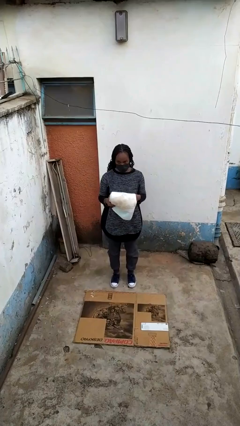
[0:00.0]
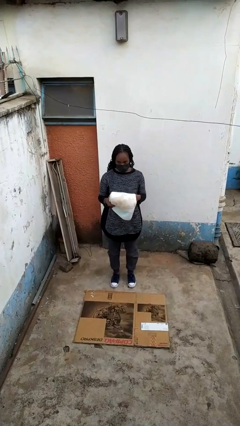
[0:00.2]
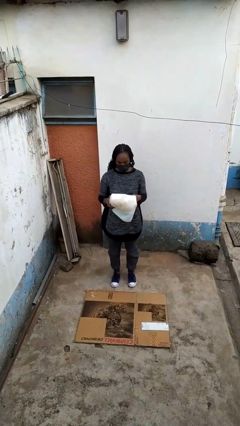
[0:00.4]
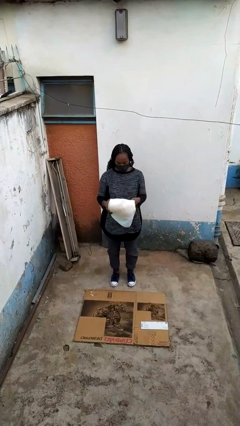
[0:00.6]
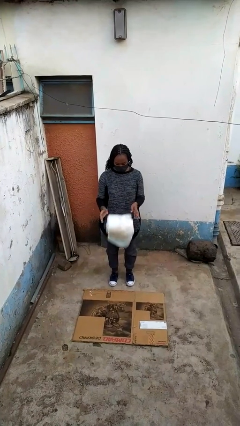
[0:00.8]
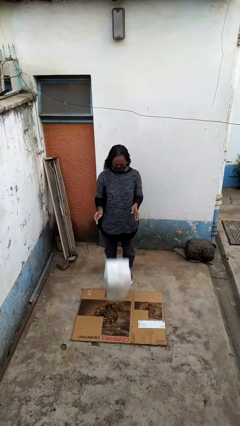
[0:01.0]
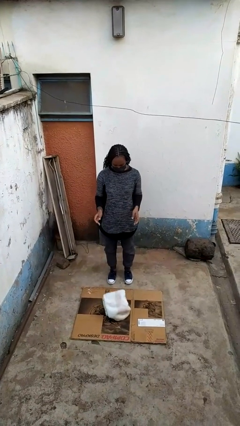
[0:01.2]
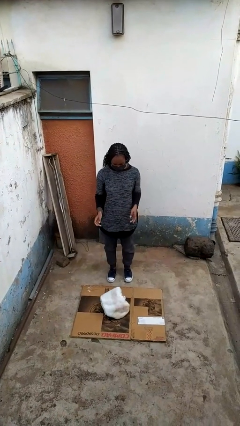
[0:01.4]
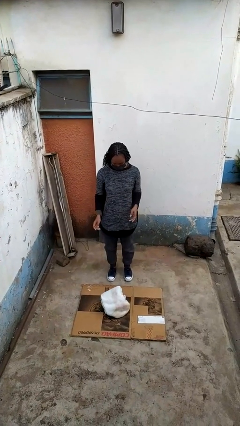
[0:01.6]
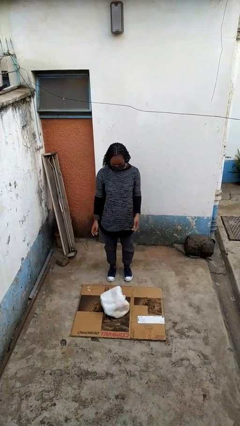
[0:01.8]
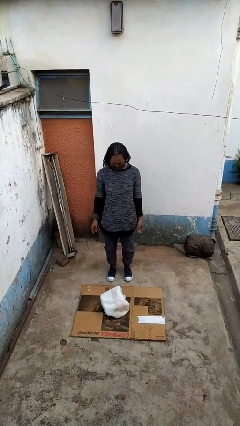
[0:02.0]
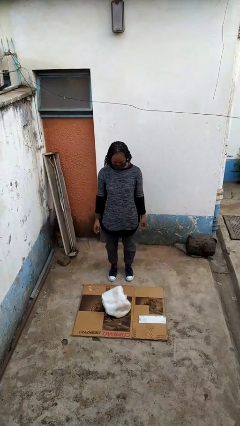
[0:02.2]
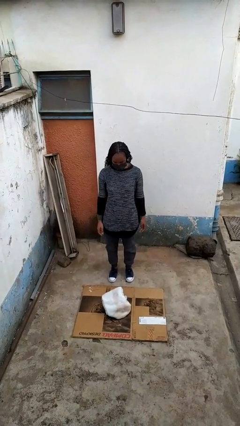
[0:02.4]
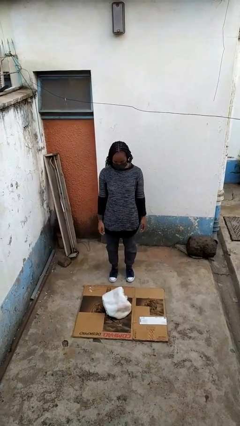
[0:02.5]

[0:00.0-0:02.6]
person drops object

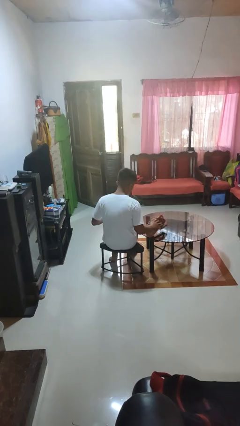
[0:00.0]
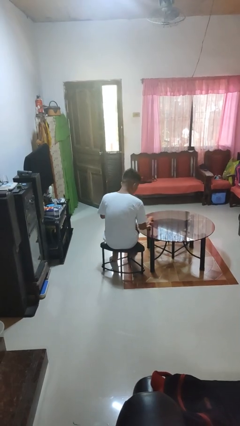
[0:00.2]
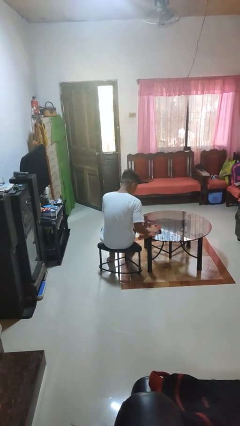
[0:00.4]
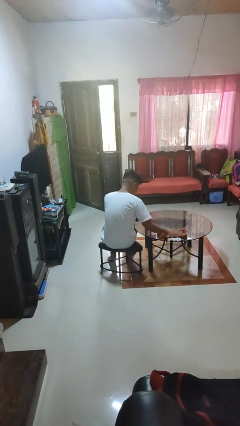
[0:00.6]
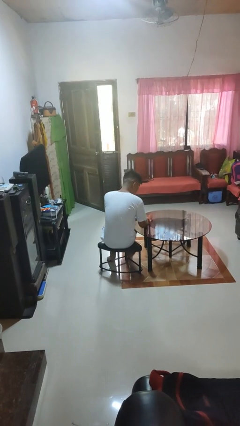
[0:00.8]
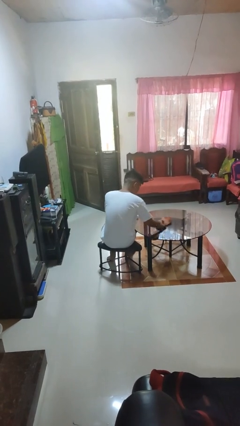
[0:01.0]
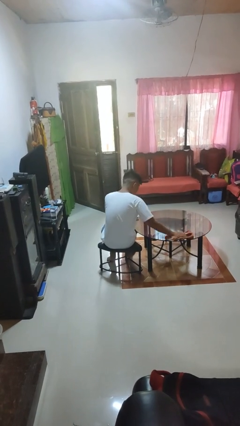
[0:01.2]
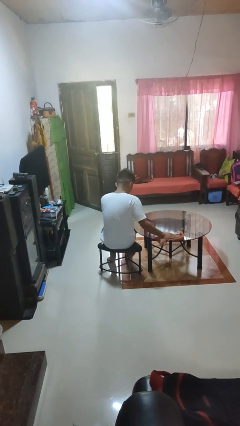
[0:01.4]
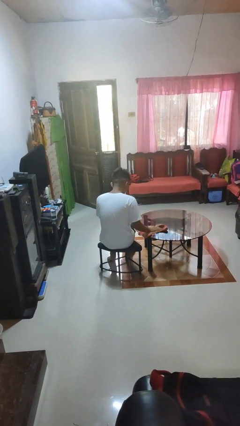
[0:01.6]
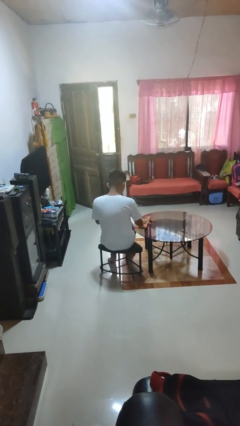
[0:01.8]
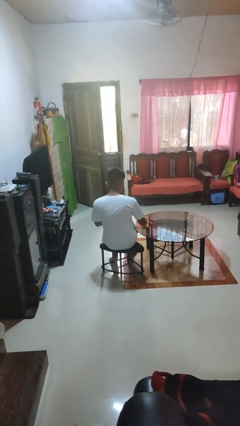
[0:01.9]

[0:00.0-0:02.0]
person cleans table with rag

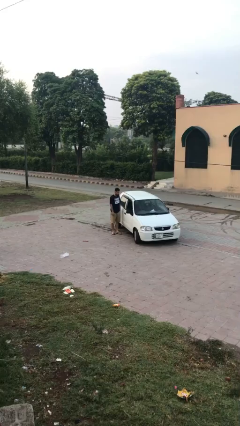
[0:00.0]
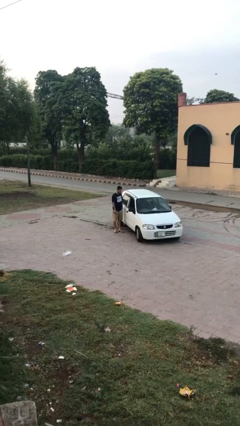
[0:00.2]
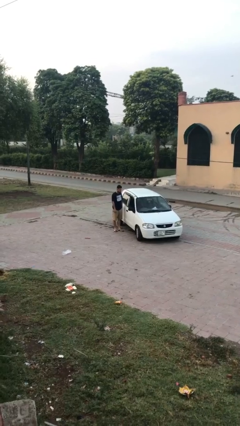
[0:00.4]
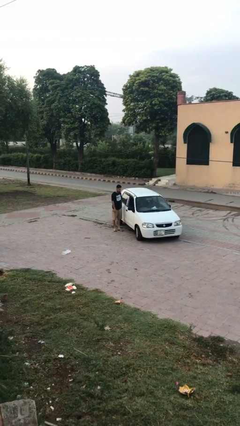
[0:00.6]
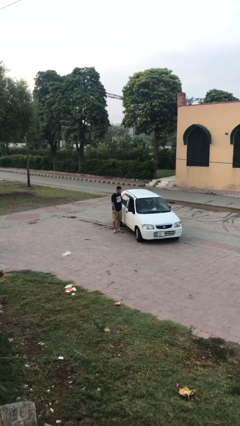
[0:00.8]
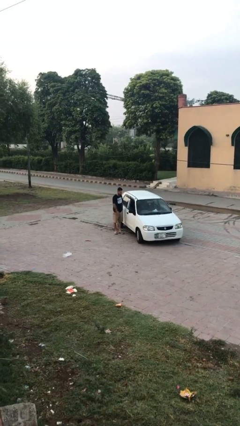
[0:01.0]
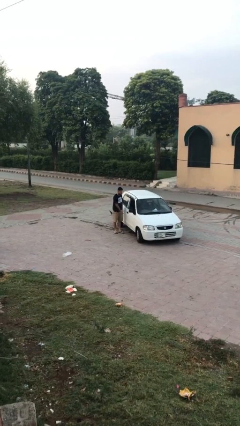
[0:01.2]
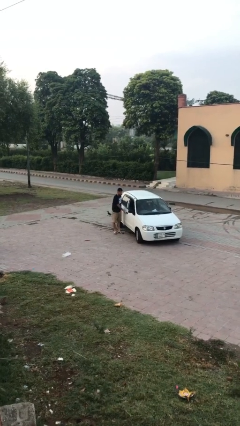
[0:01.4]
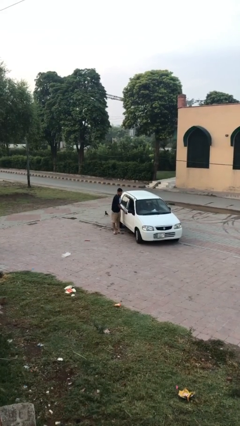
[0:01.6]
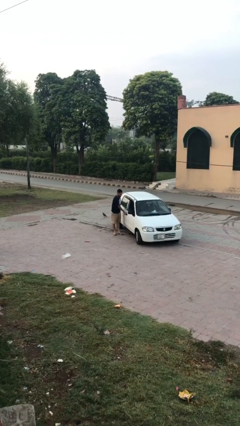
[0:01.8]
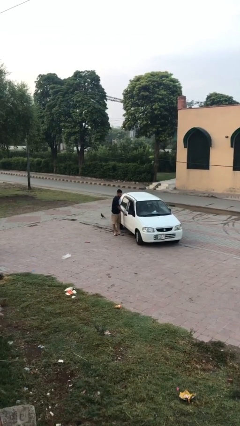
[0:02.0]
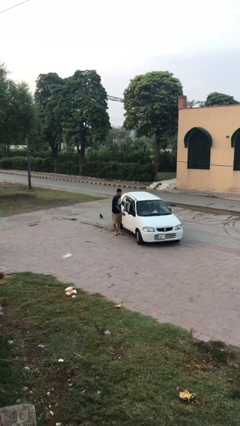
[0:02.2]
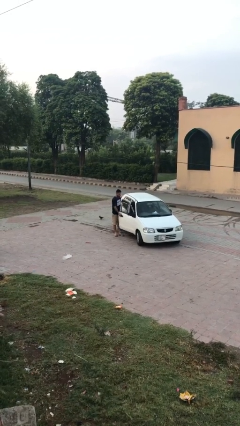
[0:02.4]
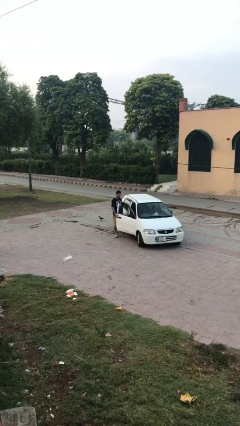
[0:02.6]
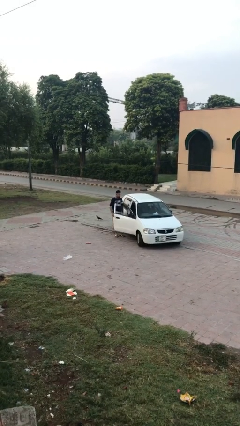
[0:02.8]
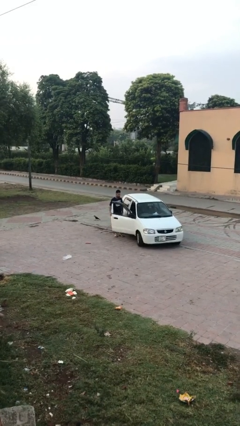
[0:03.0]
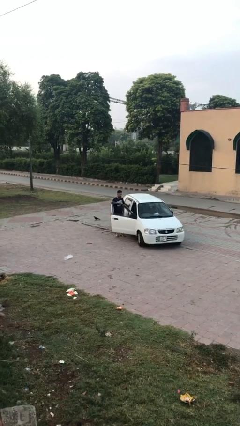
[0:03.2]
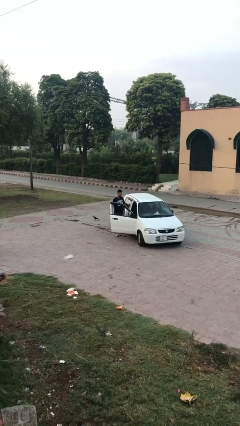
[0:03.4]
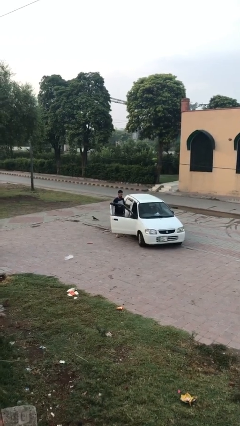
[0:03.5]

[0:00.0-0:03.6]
person opens car door

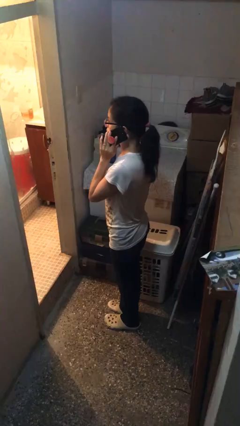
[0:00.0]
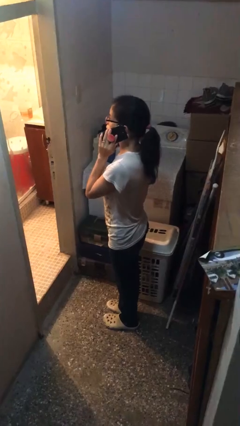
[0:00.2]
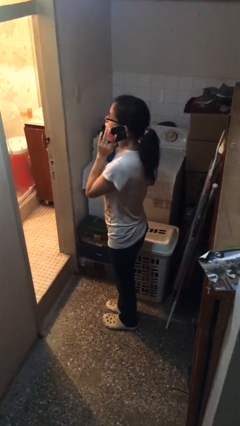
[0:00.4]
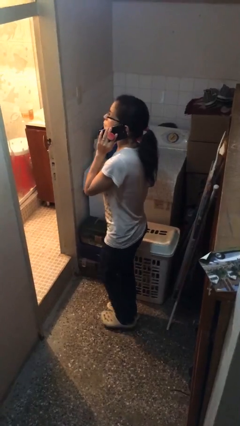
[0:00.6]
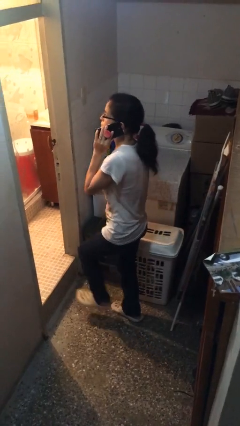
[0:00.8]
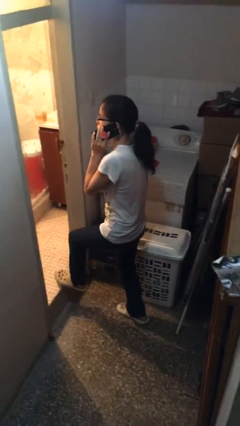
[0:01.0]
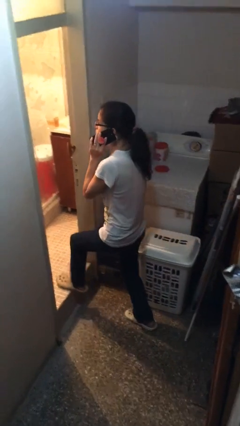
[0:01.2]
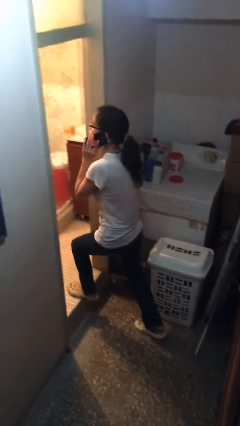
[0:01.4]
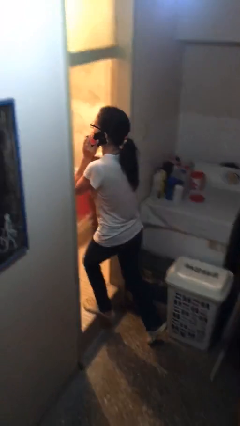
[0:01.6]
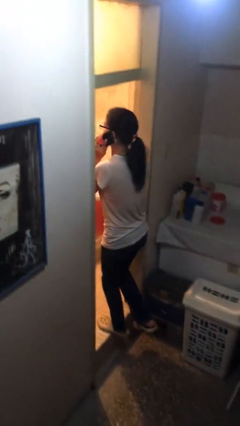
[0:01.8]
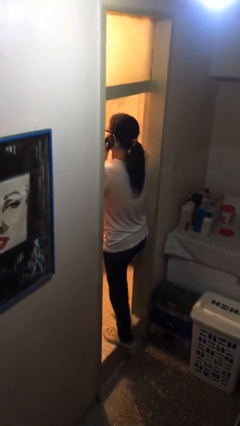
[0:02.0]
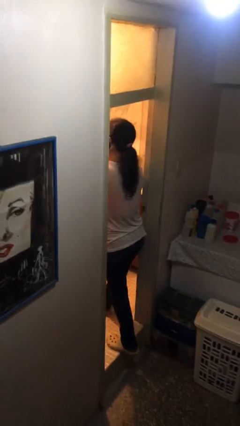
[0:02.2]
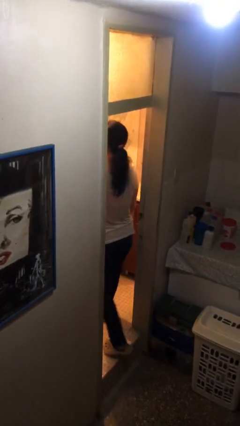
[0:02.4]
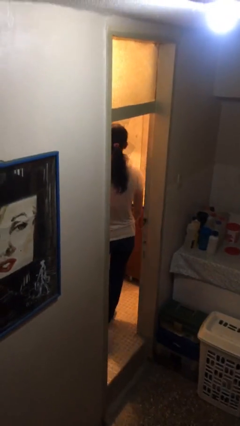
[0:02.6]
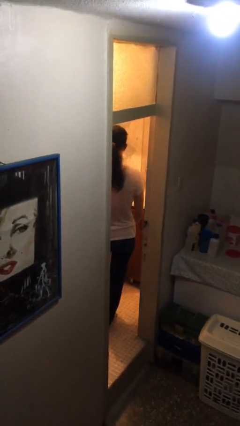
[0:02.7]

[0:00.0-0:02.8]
person exits scene through structure

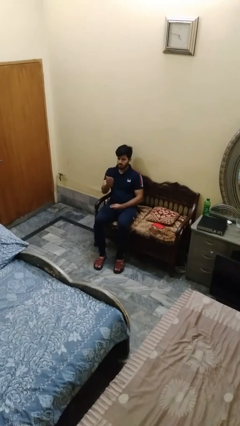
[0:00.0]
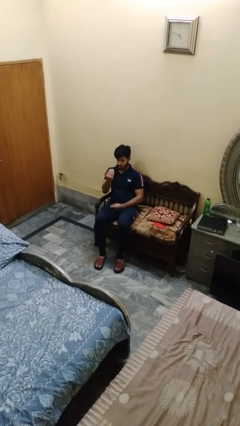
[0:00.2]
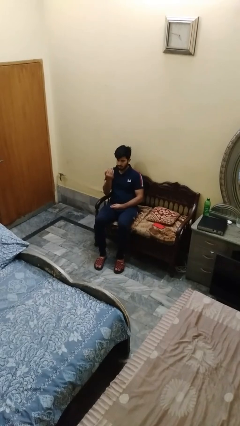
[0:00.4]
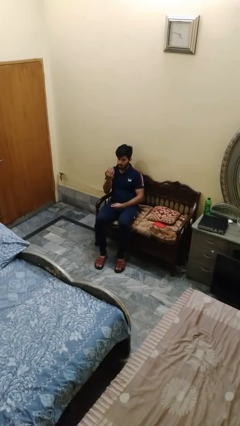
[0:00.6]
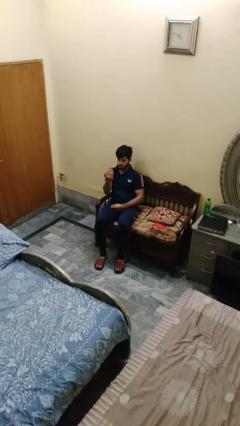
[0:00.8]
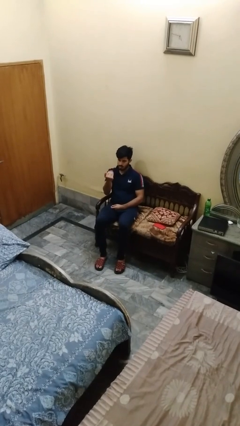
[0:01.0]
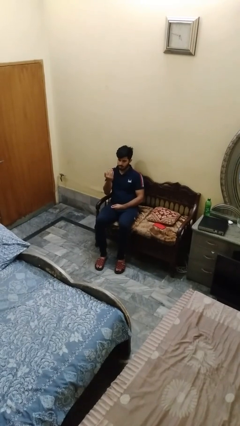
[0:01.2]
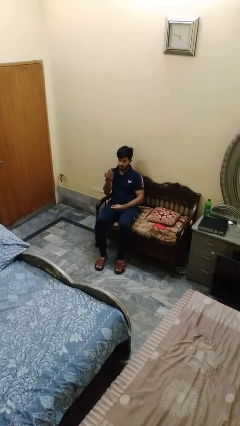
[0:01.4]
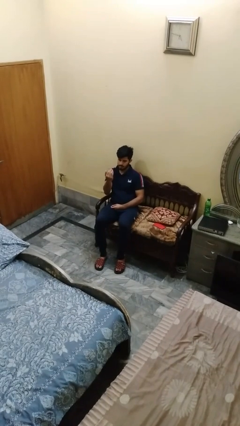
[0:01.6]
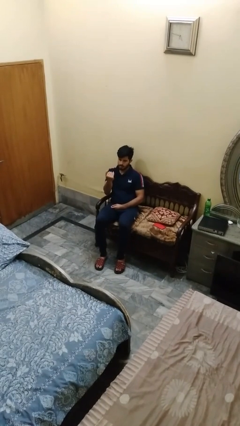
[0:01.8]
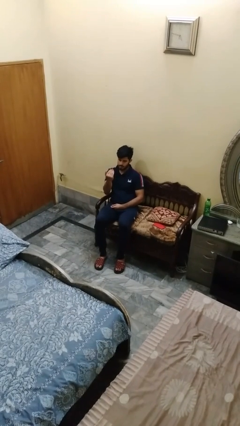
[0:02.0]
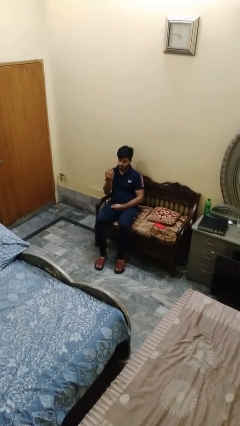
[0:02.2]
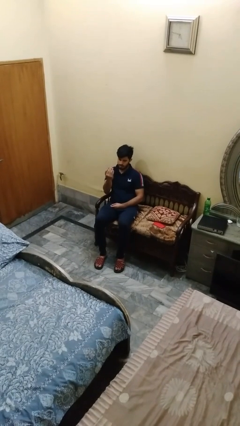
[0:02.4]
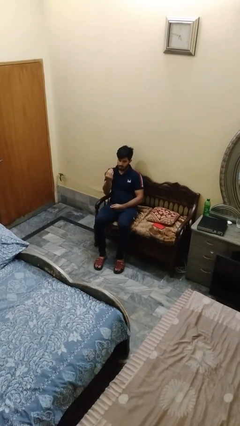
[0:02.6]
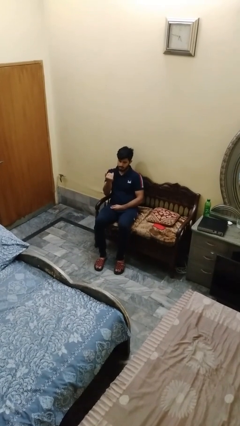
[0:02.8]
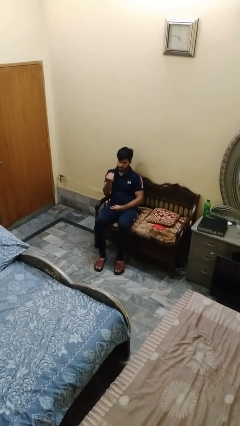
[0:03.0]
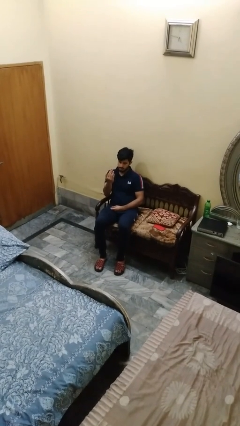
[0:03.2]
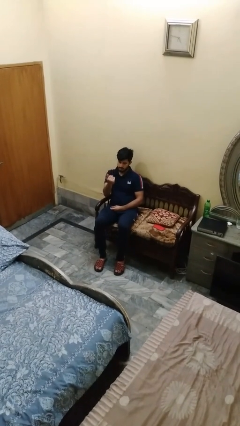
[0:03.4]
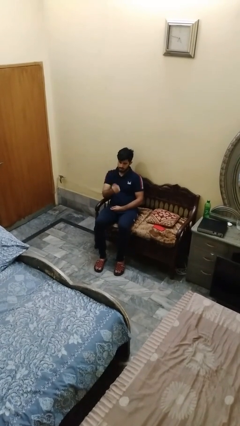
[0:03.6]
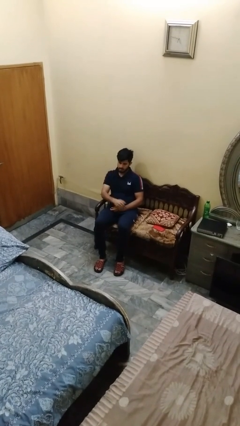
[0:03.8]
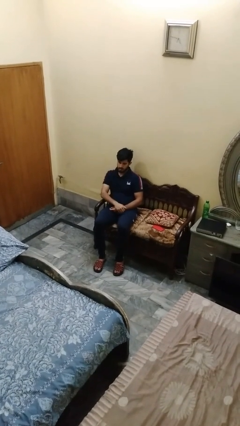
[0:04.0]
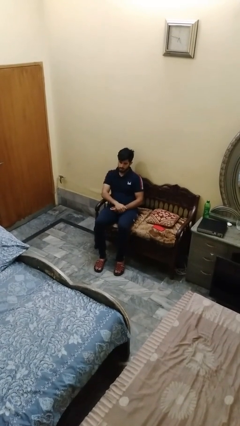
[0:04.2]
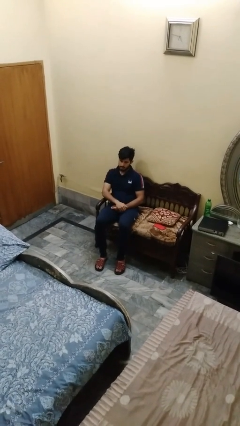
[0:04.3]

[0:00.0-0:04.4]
person gestures come here

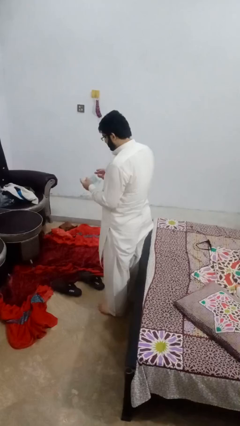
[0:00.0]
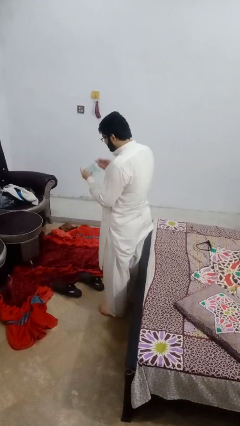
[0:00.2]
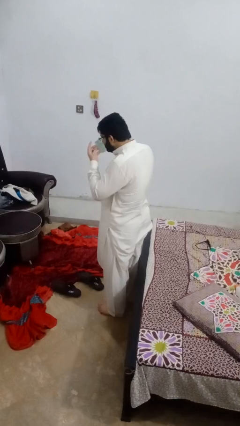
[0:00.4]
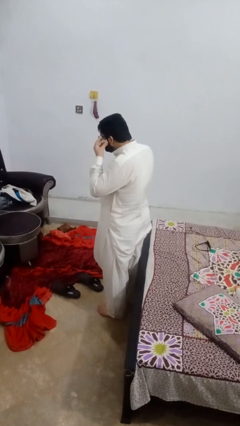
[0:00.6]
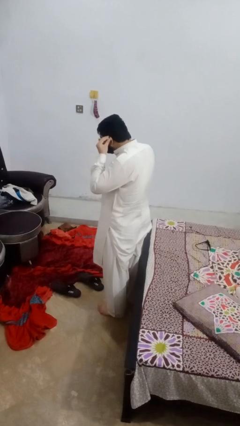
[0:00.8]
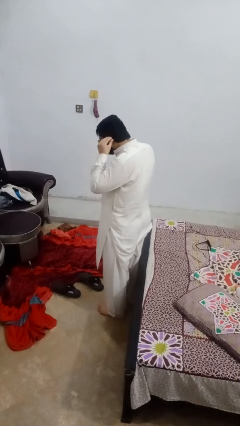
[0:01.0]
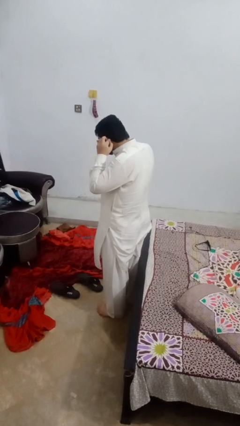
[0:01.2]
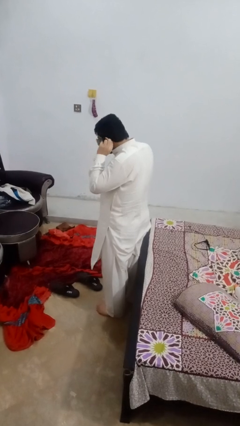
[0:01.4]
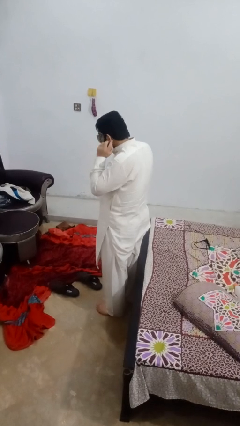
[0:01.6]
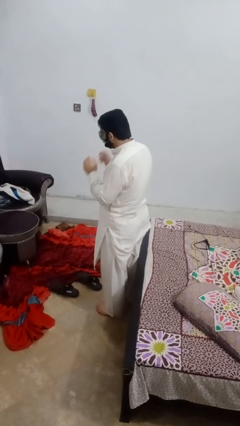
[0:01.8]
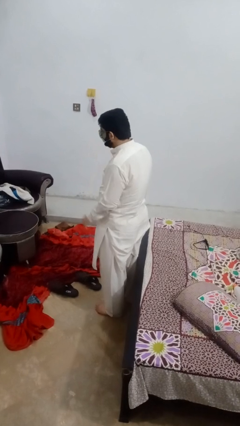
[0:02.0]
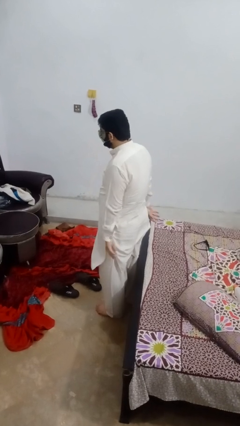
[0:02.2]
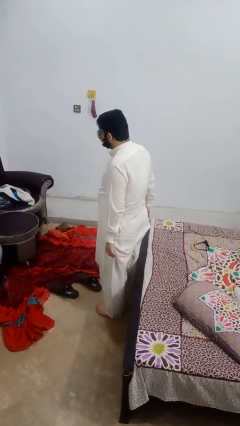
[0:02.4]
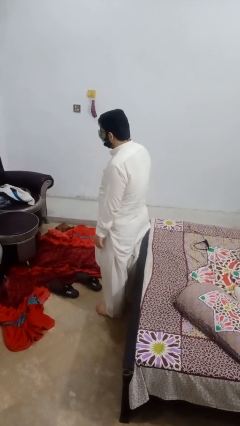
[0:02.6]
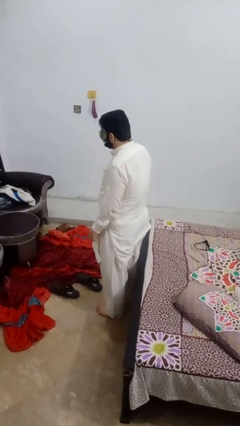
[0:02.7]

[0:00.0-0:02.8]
person puts on facemask
